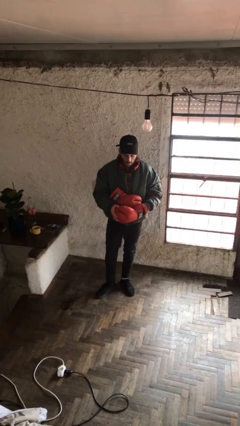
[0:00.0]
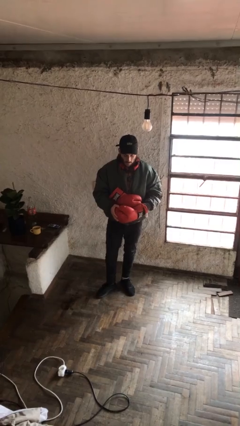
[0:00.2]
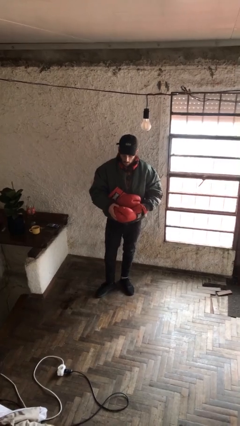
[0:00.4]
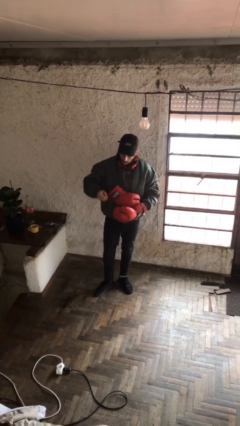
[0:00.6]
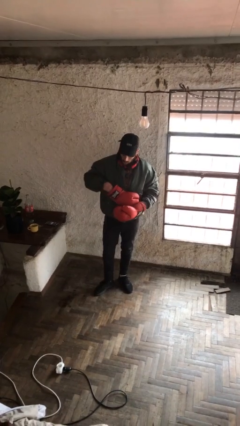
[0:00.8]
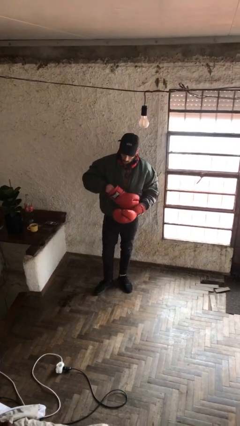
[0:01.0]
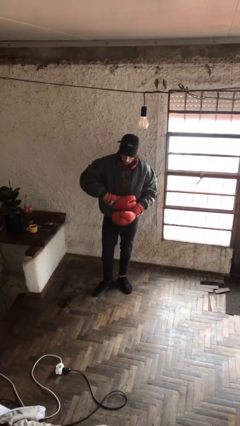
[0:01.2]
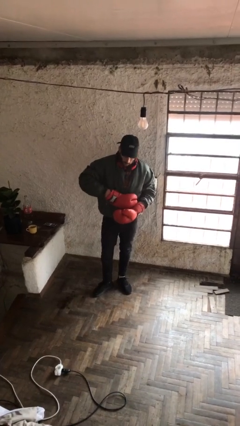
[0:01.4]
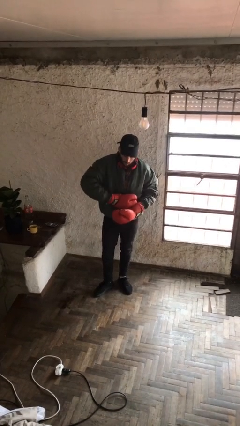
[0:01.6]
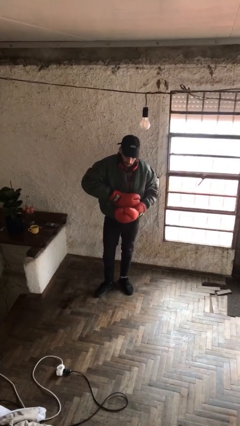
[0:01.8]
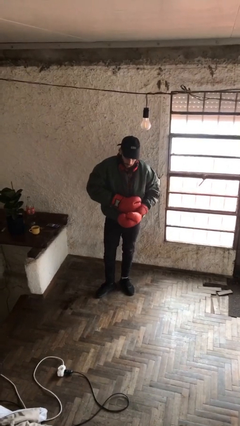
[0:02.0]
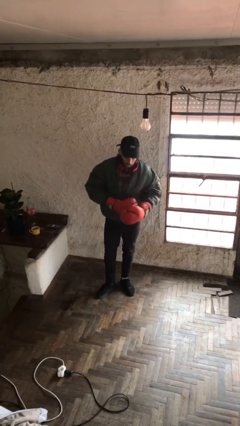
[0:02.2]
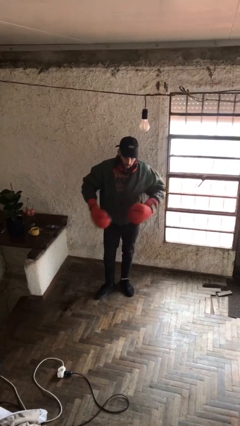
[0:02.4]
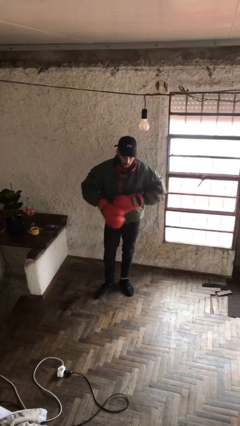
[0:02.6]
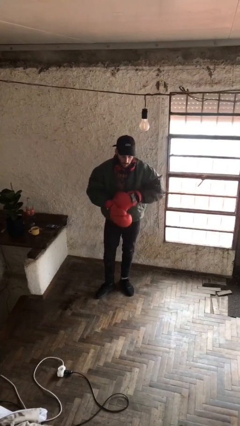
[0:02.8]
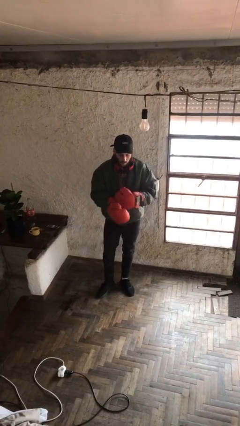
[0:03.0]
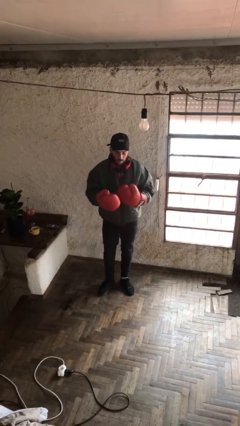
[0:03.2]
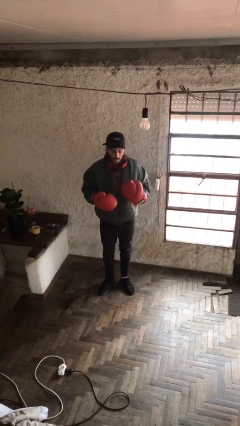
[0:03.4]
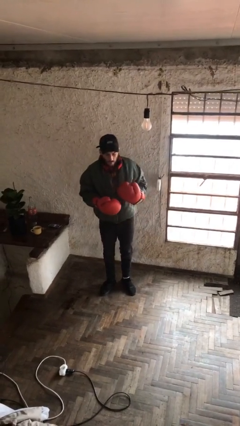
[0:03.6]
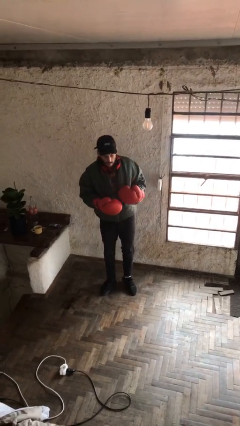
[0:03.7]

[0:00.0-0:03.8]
person puts on gloves

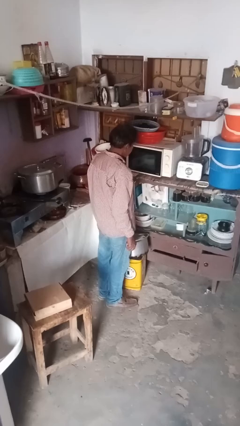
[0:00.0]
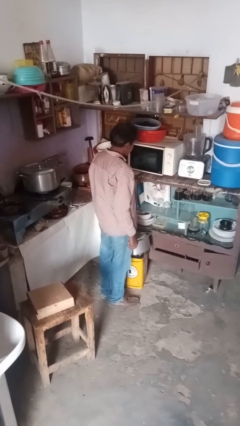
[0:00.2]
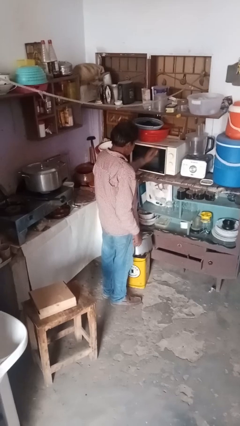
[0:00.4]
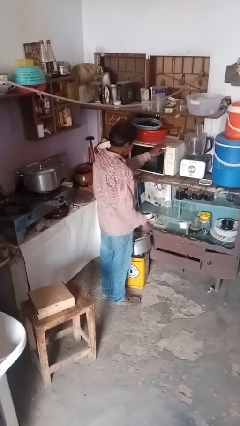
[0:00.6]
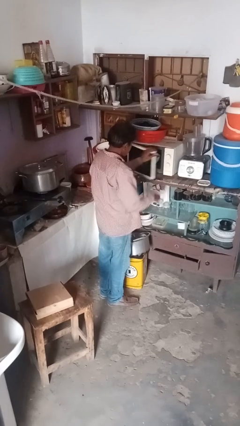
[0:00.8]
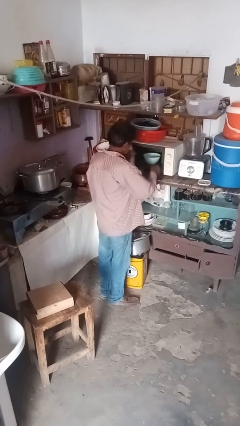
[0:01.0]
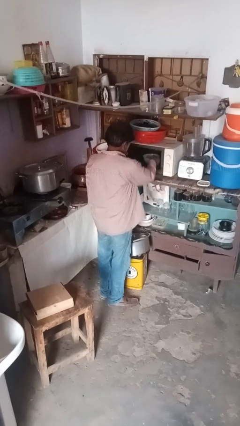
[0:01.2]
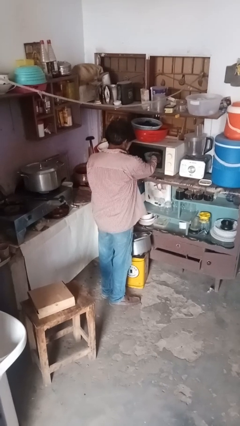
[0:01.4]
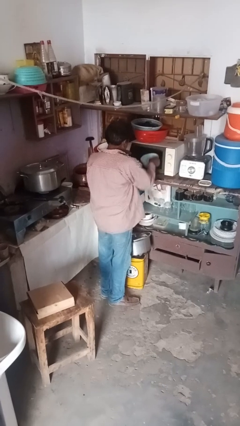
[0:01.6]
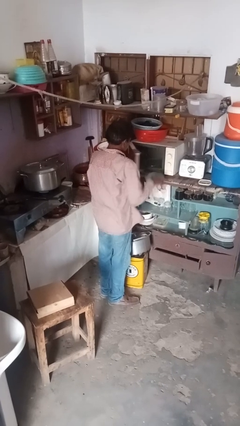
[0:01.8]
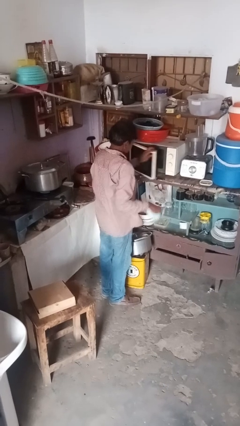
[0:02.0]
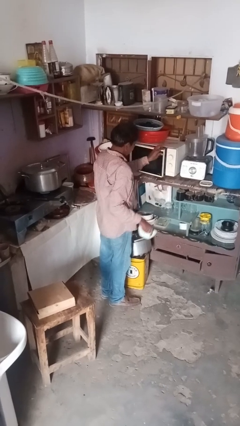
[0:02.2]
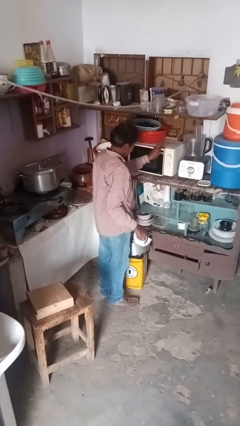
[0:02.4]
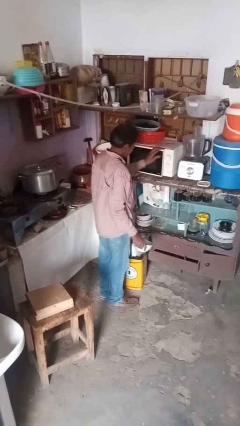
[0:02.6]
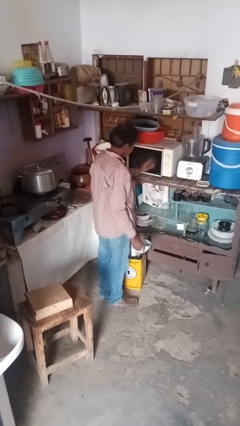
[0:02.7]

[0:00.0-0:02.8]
person takes object from microwave

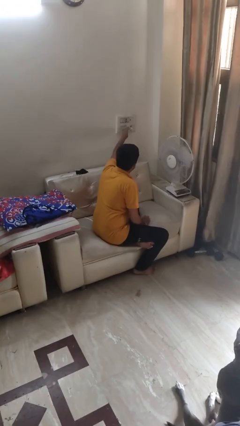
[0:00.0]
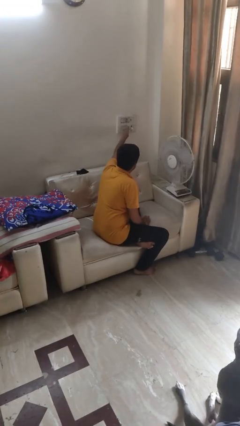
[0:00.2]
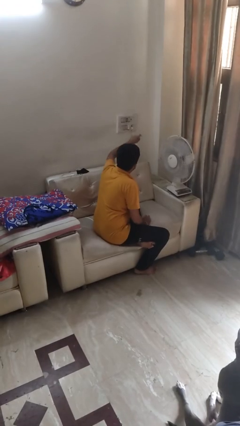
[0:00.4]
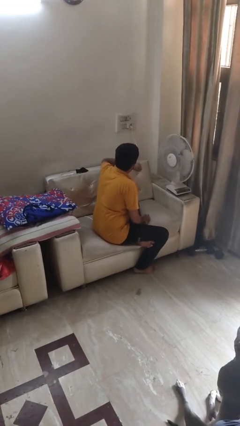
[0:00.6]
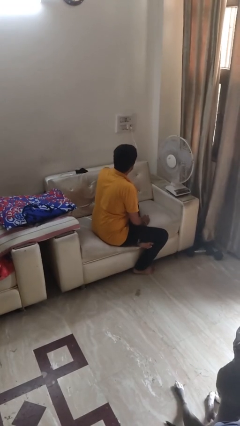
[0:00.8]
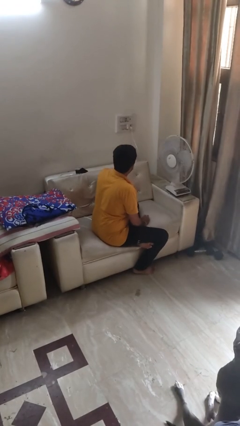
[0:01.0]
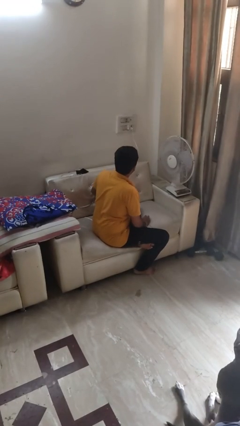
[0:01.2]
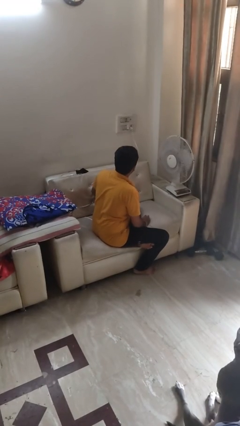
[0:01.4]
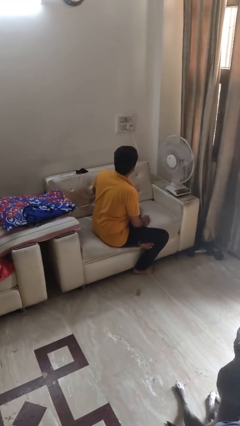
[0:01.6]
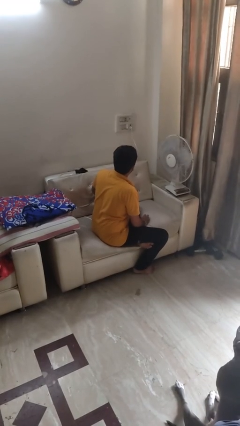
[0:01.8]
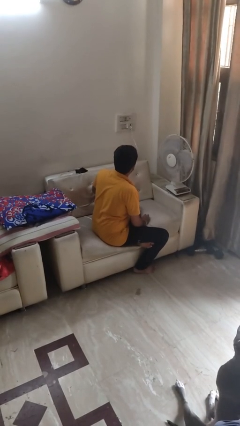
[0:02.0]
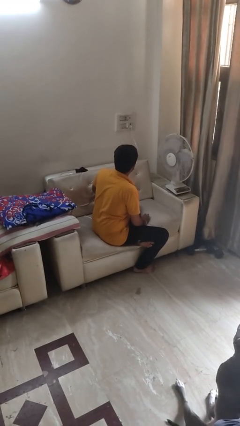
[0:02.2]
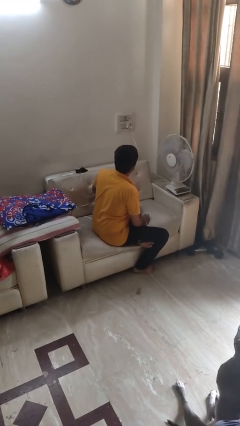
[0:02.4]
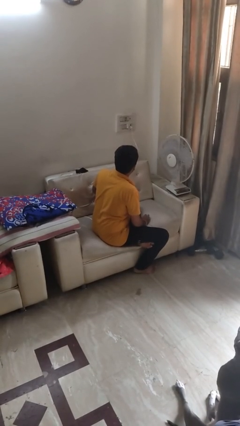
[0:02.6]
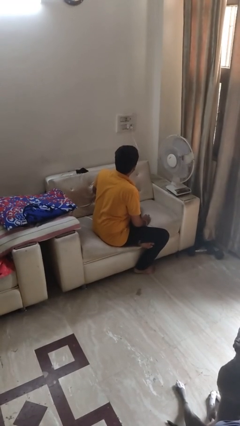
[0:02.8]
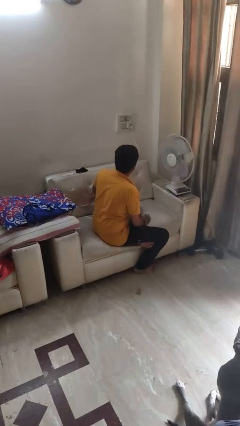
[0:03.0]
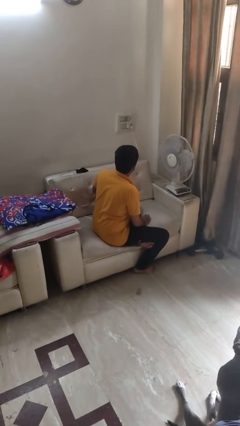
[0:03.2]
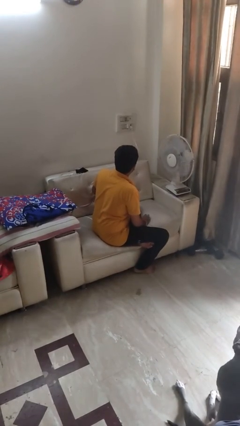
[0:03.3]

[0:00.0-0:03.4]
person turns off fan

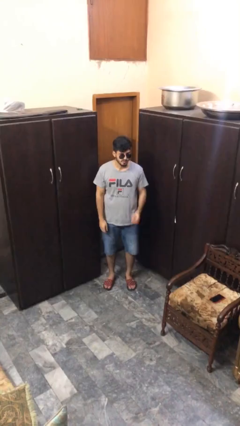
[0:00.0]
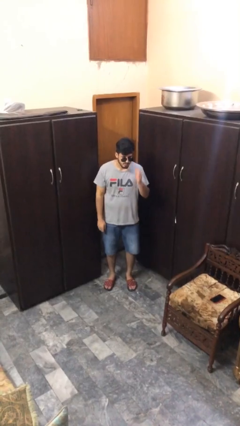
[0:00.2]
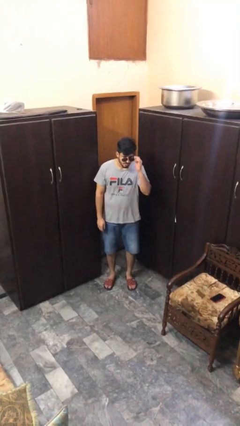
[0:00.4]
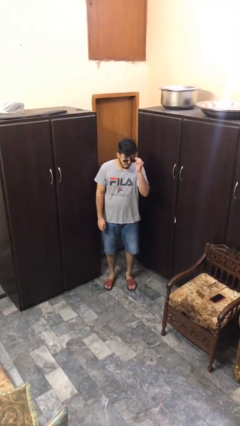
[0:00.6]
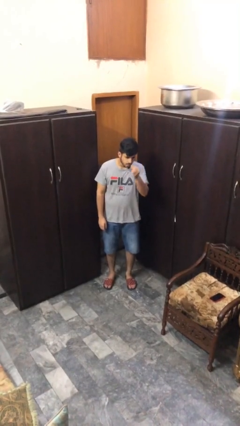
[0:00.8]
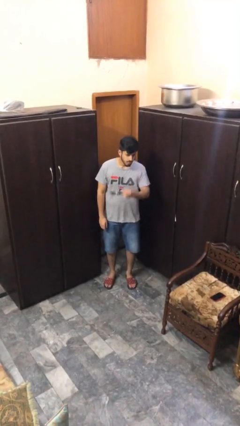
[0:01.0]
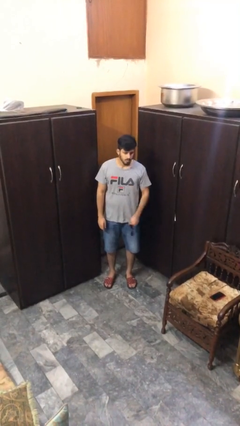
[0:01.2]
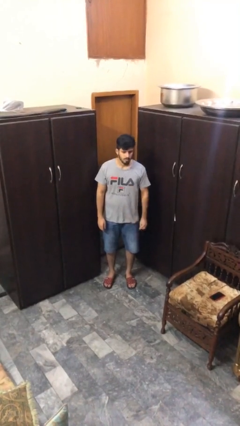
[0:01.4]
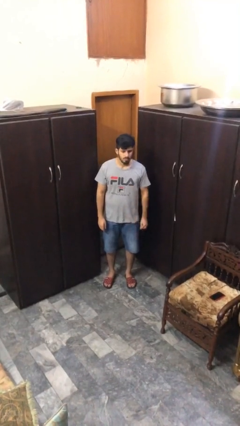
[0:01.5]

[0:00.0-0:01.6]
person takes off sunglasses

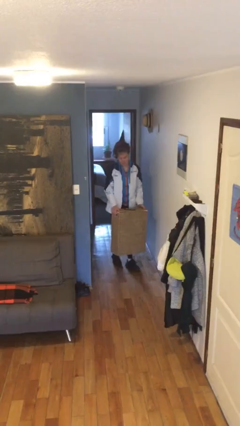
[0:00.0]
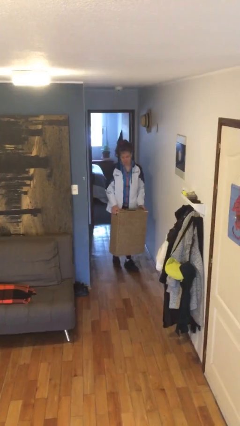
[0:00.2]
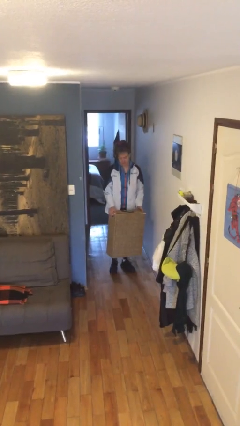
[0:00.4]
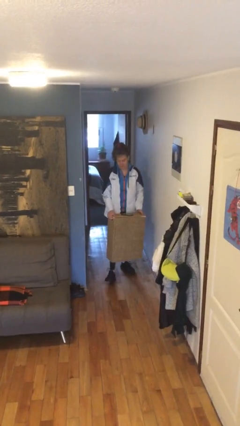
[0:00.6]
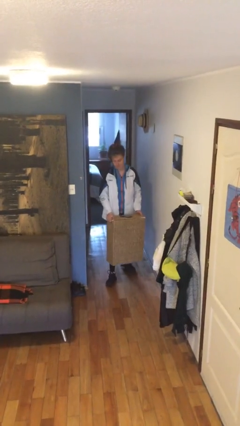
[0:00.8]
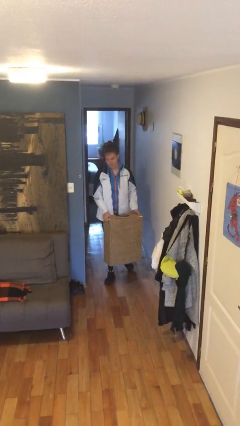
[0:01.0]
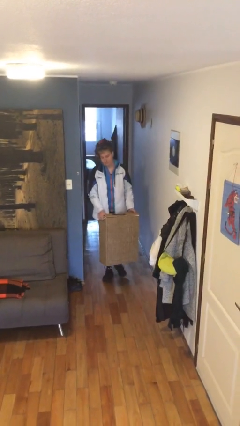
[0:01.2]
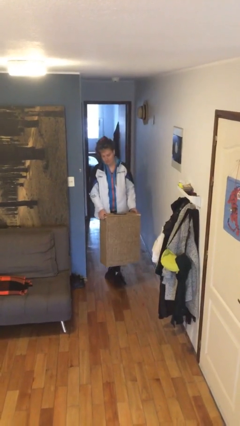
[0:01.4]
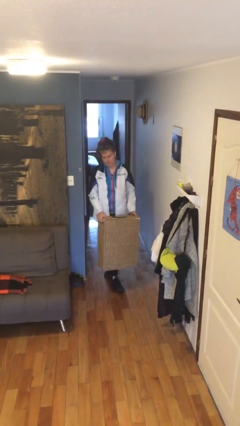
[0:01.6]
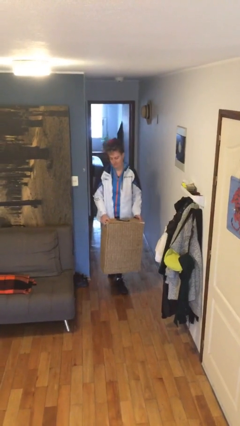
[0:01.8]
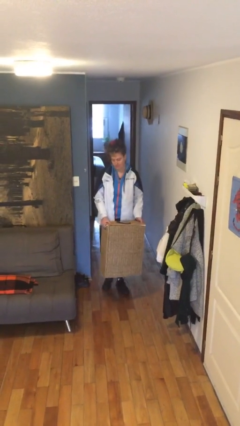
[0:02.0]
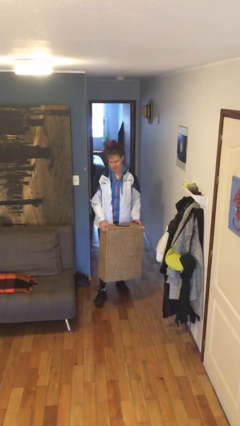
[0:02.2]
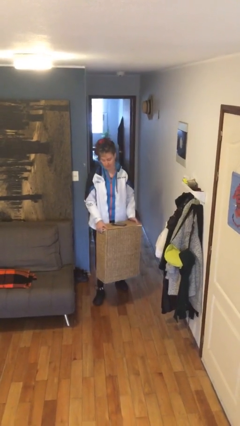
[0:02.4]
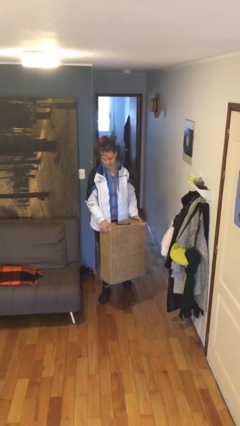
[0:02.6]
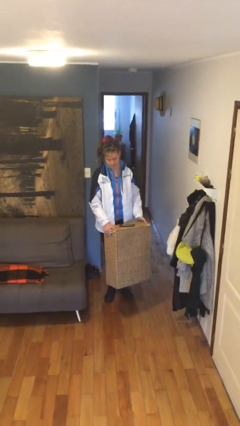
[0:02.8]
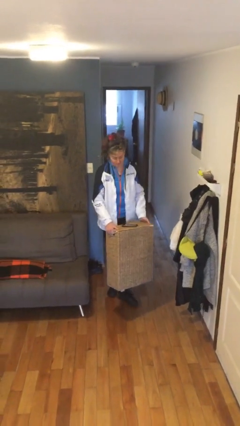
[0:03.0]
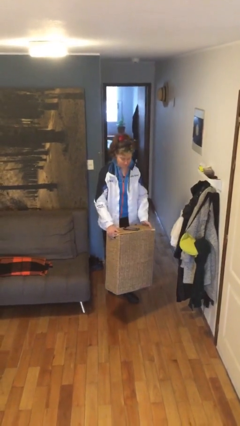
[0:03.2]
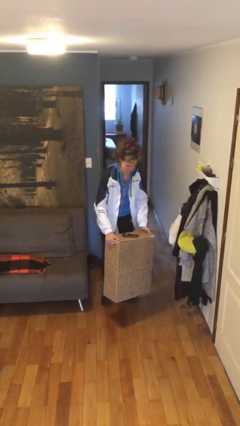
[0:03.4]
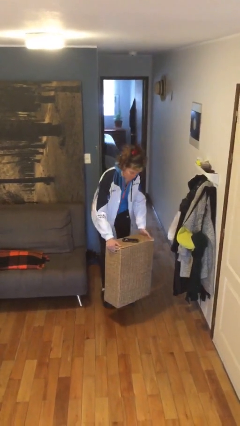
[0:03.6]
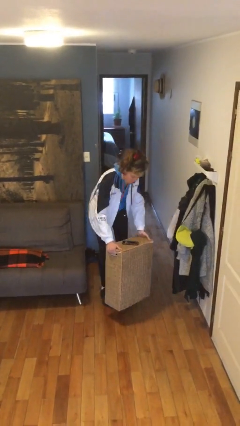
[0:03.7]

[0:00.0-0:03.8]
person carries heavy object

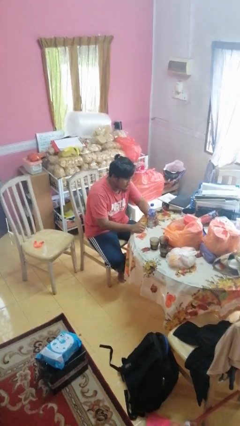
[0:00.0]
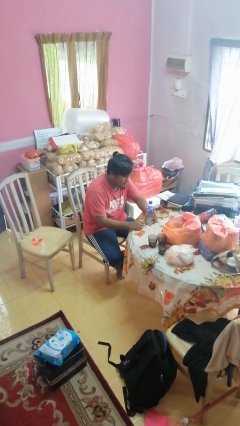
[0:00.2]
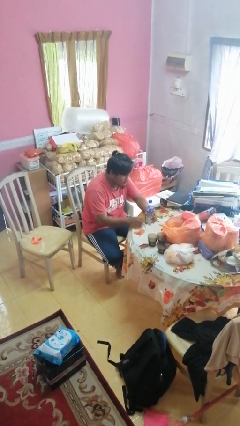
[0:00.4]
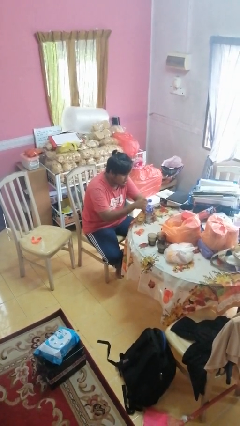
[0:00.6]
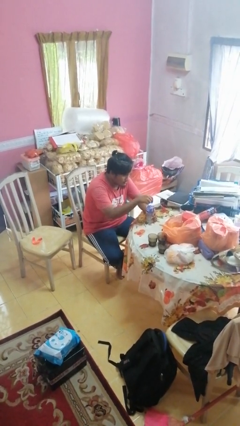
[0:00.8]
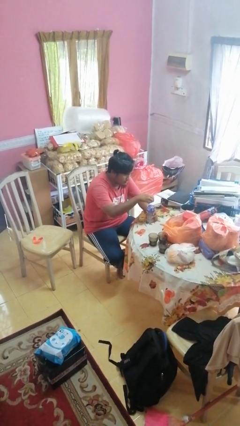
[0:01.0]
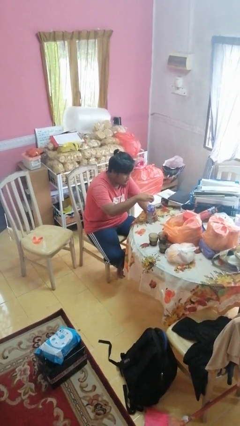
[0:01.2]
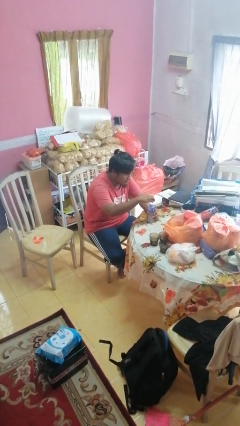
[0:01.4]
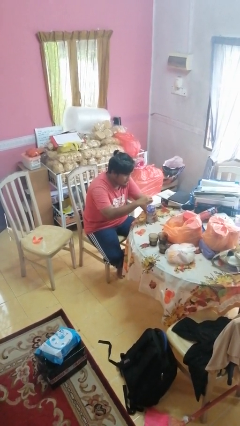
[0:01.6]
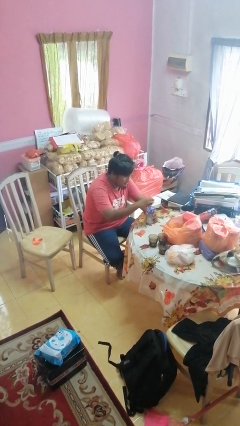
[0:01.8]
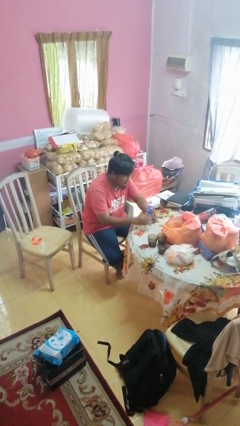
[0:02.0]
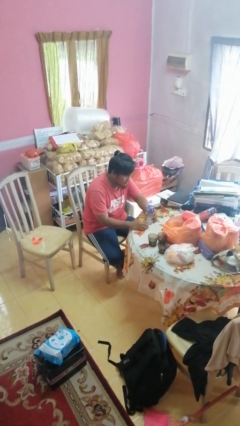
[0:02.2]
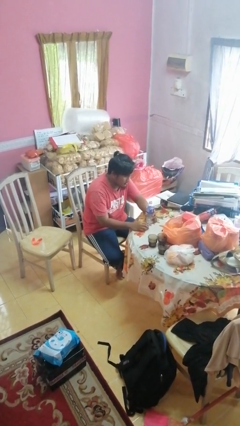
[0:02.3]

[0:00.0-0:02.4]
person unscrews lid from bottle
